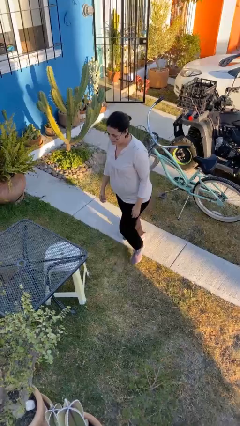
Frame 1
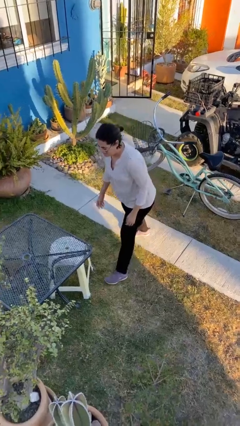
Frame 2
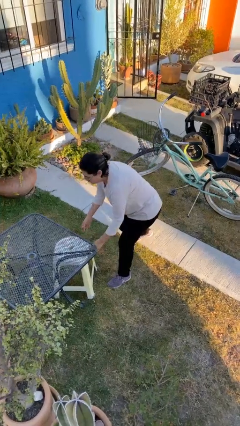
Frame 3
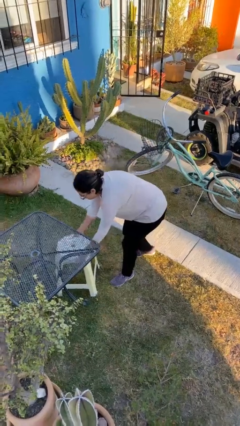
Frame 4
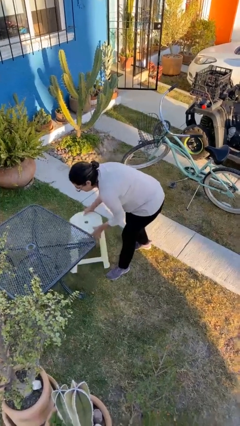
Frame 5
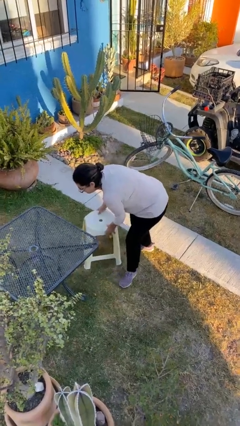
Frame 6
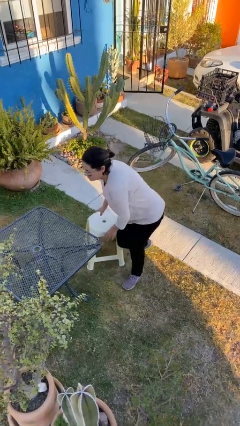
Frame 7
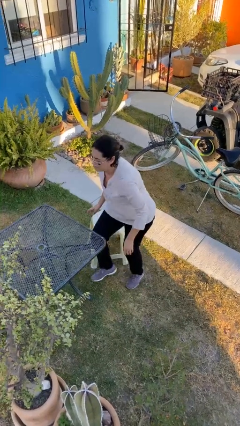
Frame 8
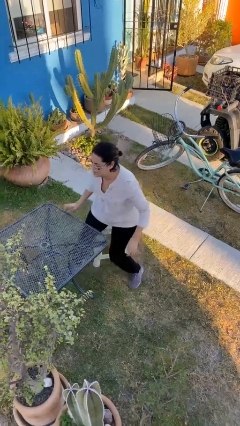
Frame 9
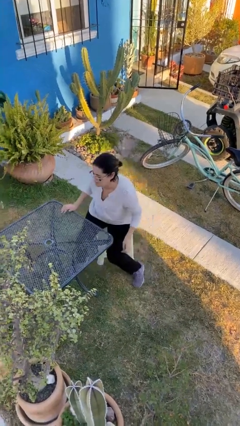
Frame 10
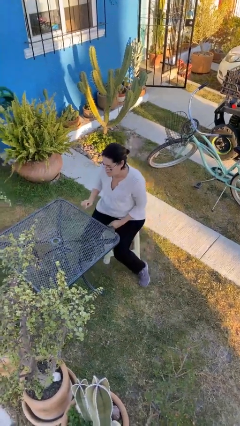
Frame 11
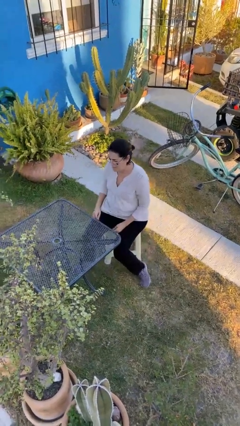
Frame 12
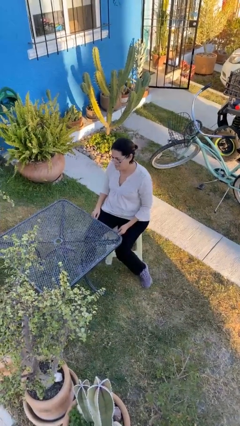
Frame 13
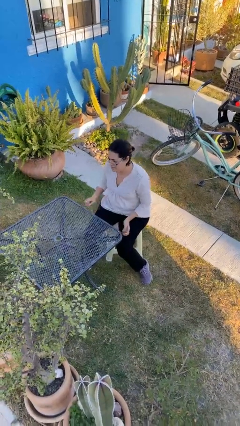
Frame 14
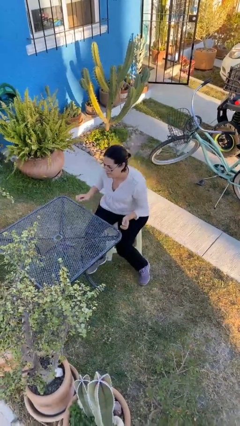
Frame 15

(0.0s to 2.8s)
person sits down

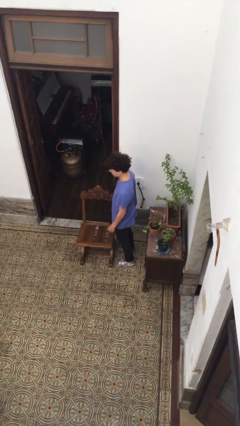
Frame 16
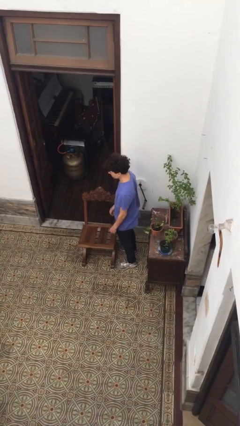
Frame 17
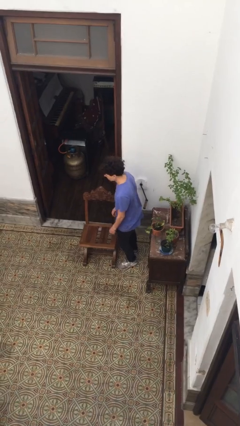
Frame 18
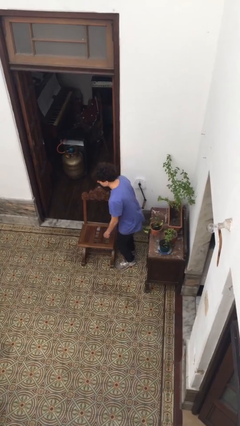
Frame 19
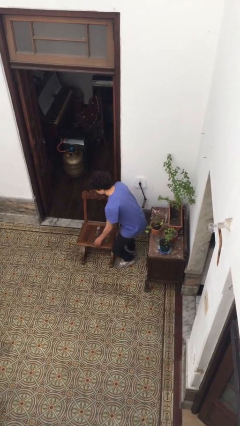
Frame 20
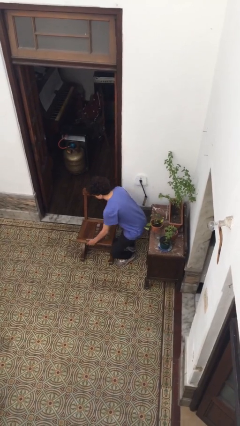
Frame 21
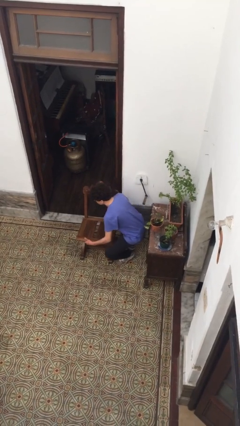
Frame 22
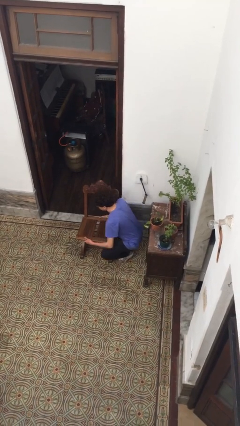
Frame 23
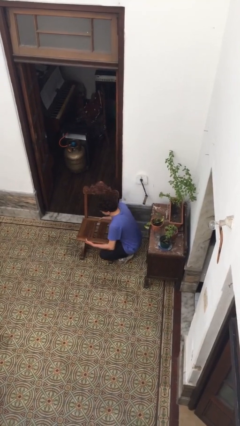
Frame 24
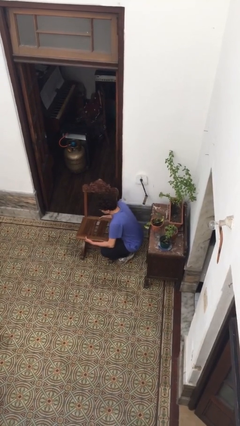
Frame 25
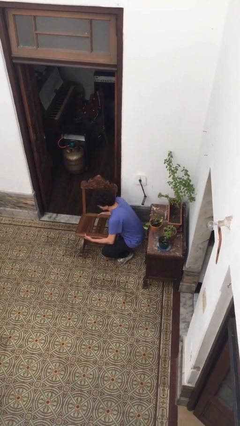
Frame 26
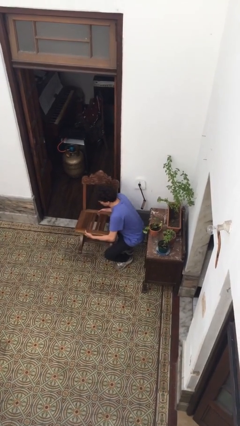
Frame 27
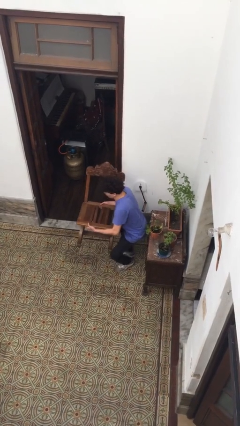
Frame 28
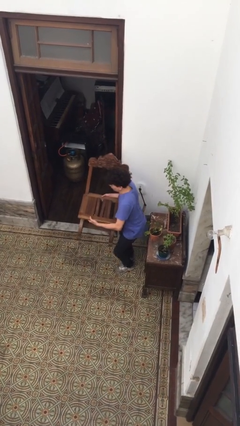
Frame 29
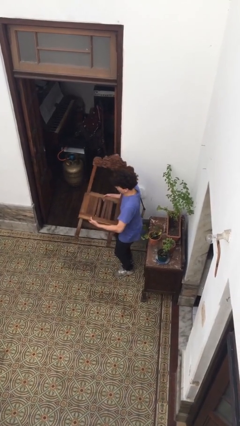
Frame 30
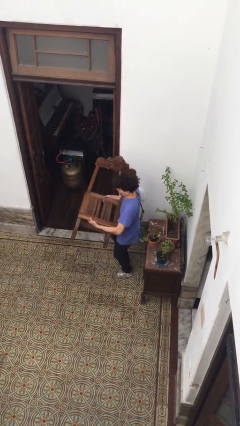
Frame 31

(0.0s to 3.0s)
person picks up object from floor

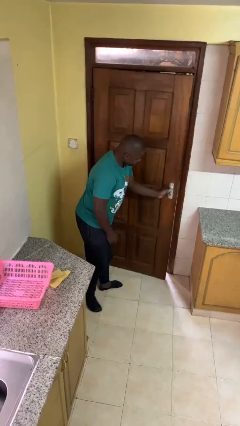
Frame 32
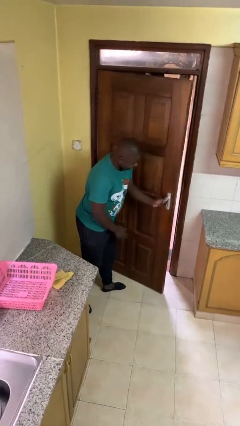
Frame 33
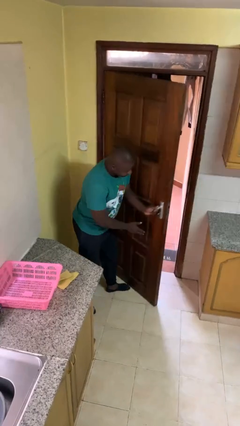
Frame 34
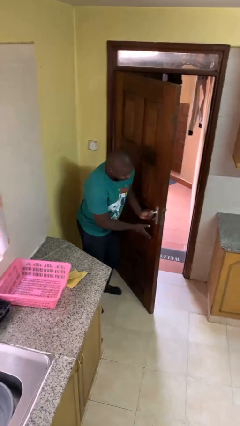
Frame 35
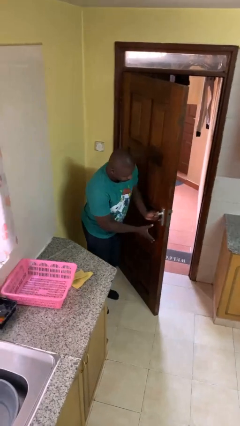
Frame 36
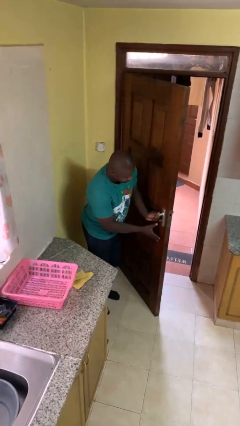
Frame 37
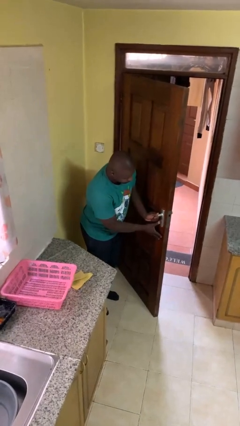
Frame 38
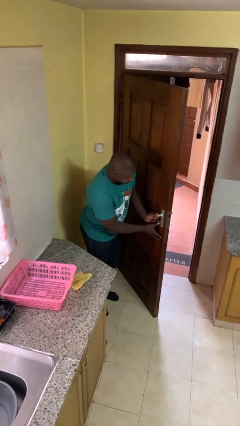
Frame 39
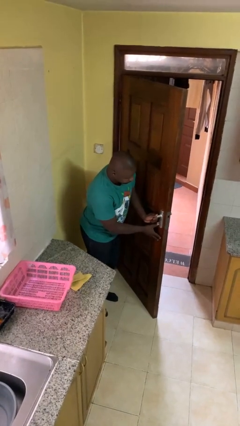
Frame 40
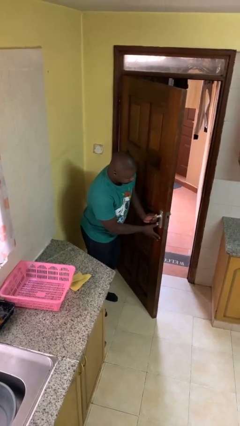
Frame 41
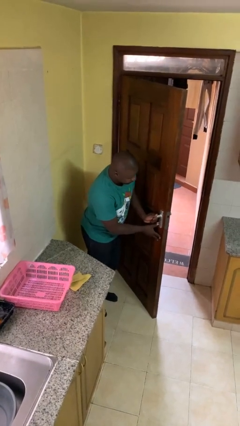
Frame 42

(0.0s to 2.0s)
person opens facility door

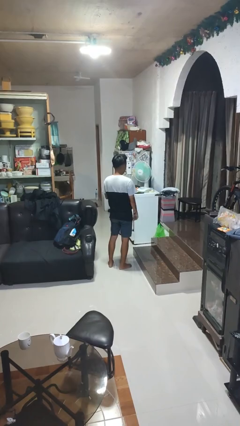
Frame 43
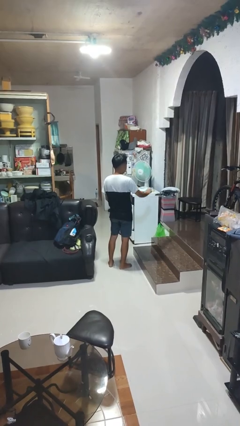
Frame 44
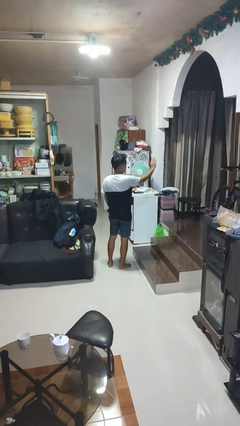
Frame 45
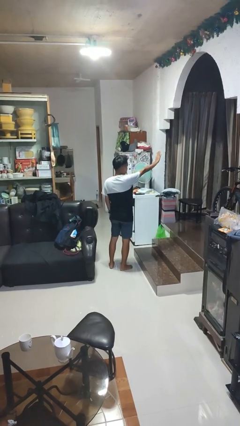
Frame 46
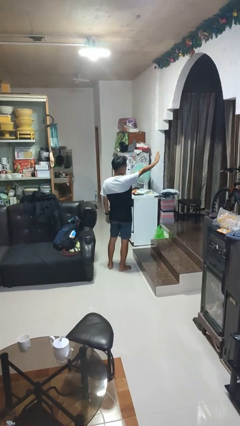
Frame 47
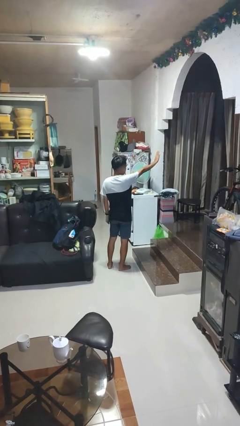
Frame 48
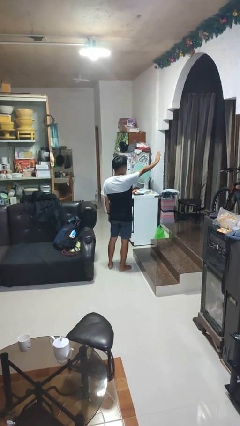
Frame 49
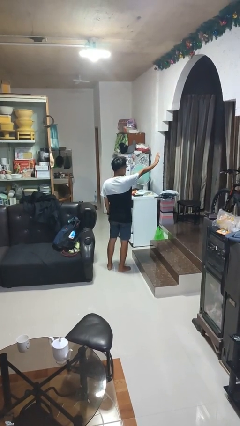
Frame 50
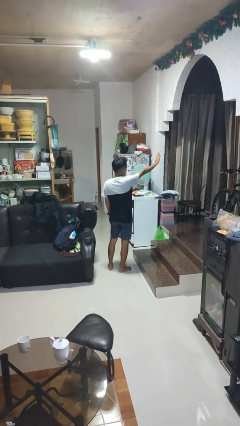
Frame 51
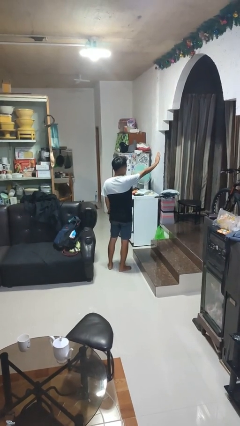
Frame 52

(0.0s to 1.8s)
person gestures stop

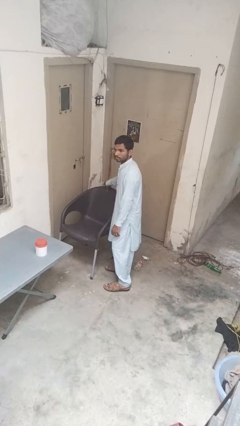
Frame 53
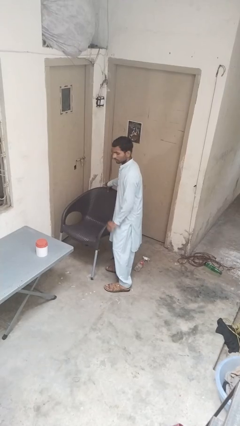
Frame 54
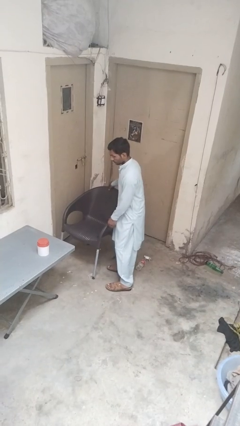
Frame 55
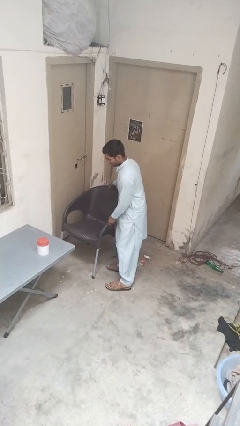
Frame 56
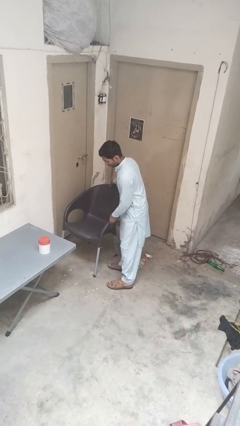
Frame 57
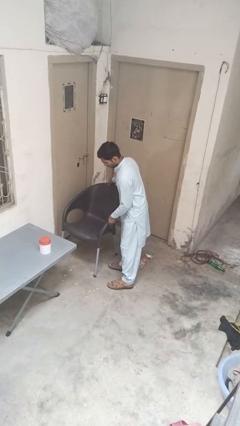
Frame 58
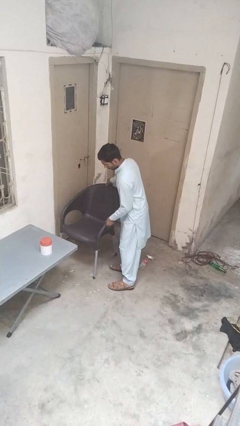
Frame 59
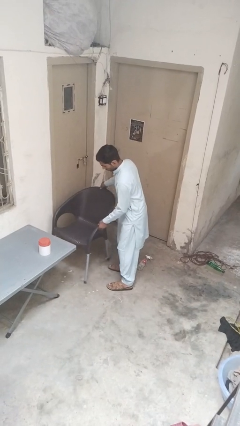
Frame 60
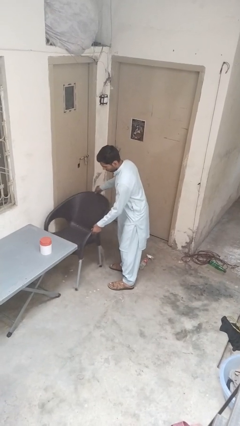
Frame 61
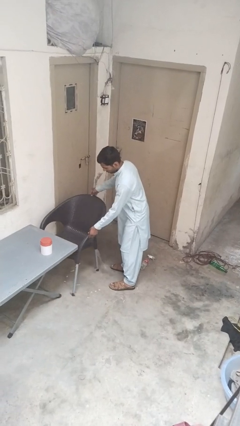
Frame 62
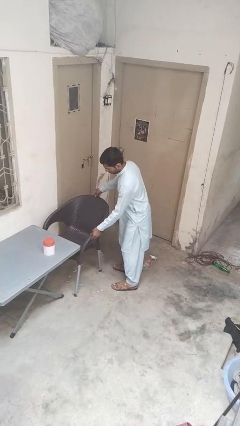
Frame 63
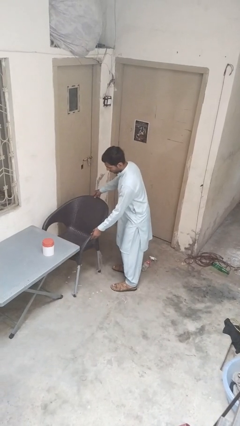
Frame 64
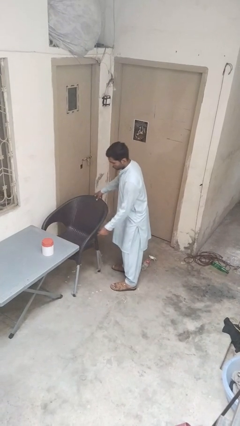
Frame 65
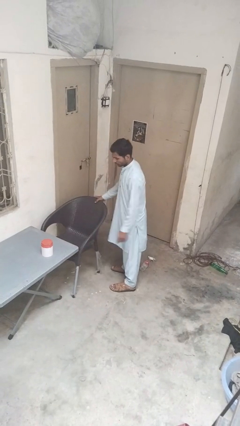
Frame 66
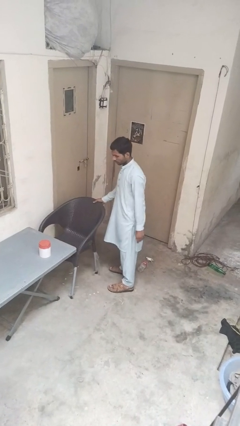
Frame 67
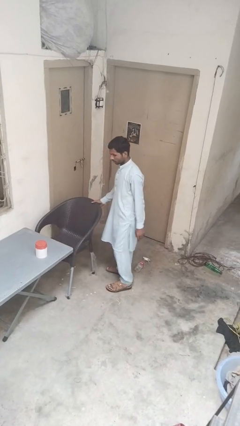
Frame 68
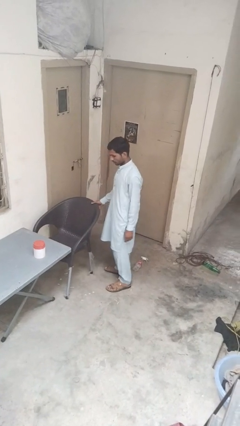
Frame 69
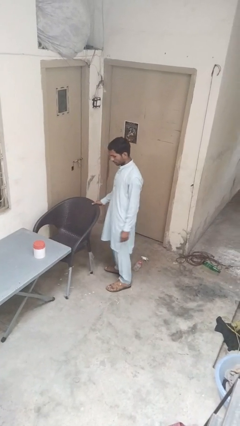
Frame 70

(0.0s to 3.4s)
person pushes in chair

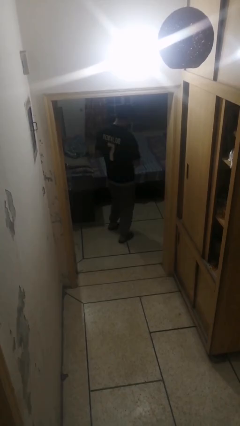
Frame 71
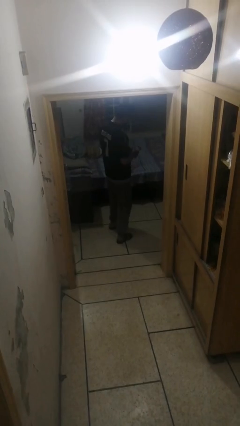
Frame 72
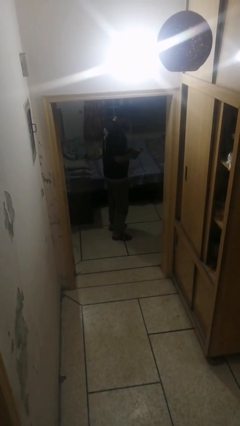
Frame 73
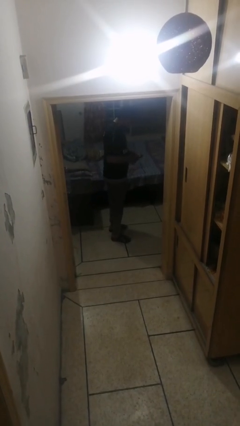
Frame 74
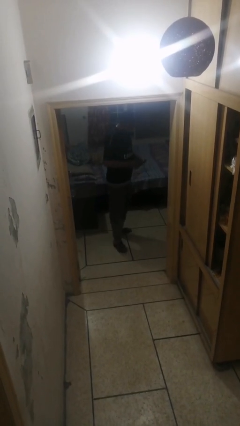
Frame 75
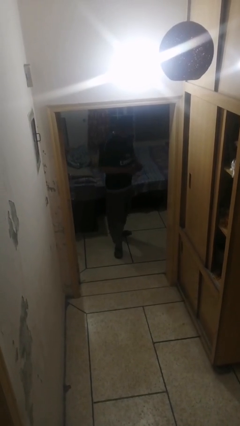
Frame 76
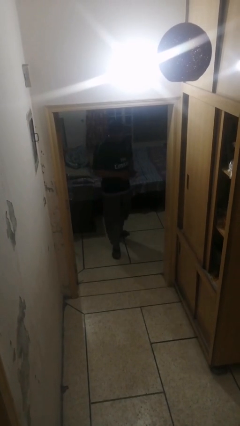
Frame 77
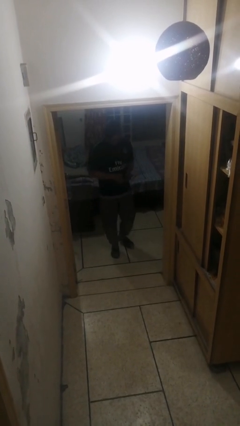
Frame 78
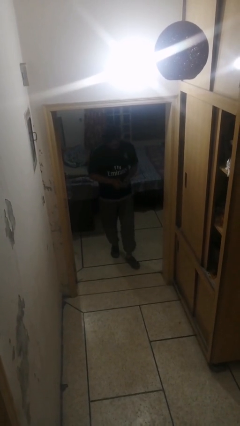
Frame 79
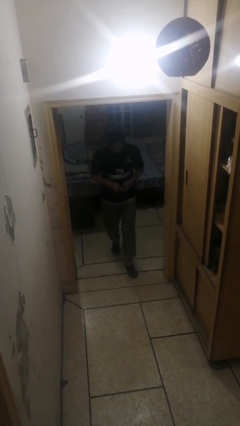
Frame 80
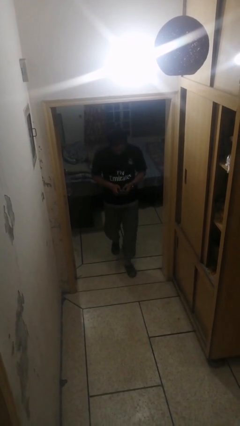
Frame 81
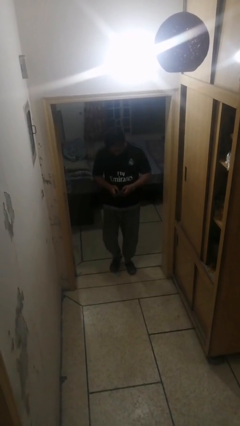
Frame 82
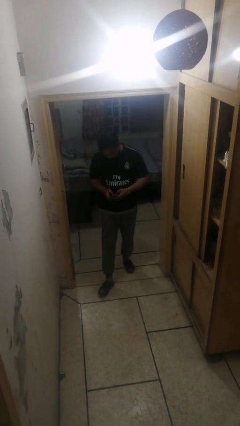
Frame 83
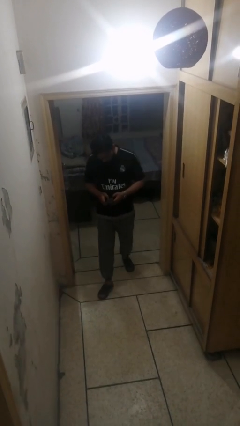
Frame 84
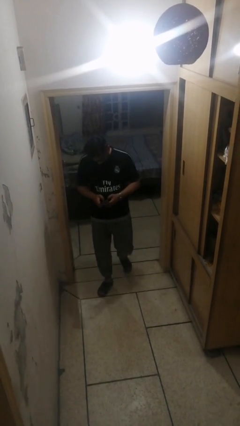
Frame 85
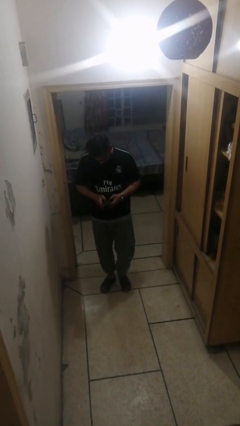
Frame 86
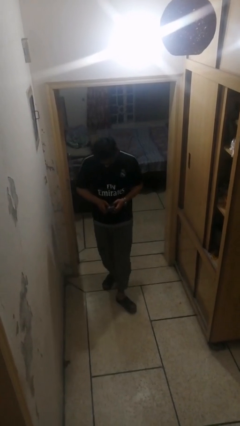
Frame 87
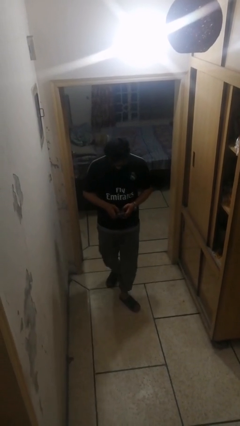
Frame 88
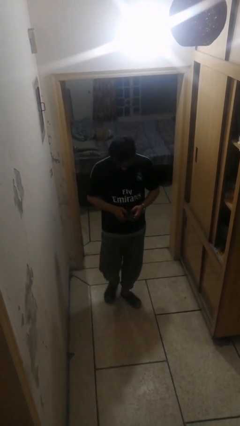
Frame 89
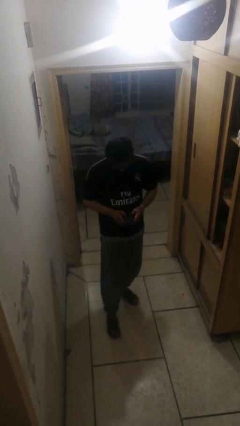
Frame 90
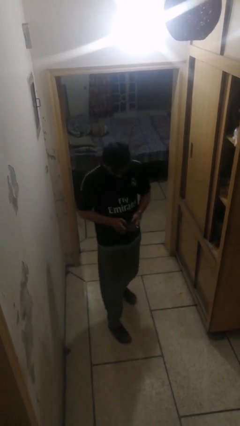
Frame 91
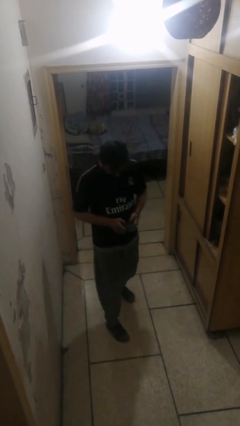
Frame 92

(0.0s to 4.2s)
person enters scene through structure

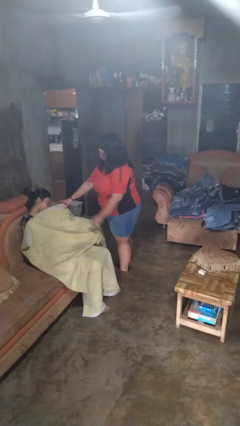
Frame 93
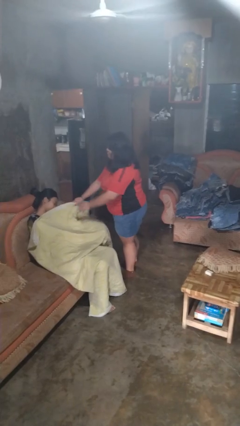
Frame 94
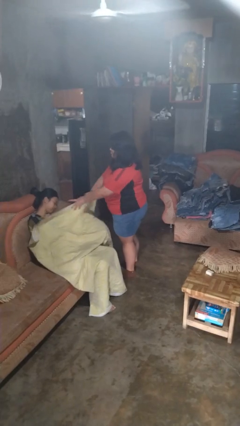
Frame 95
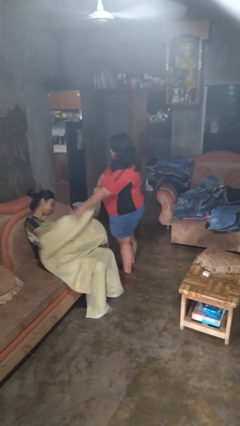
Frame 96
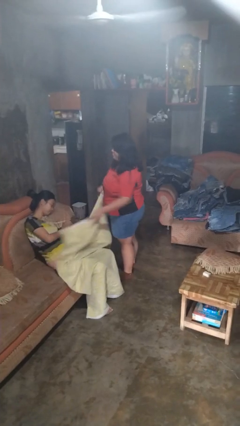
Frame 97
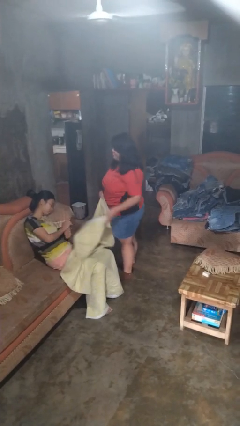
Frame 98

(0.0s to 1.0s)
person uncovers friend with blanket
